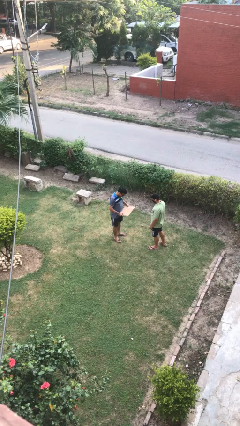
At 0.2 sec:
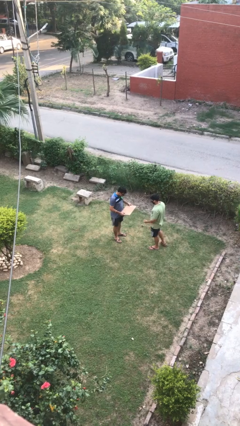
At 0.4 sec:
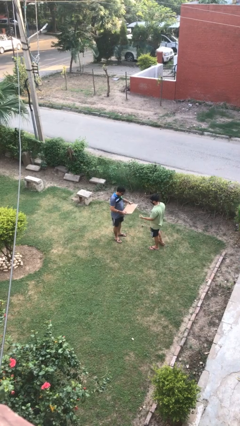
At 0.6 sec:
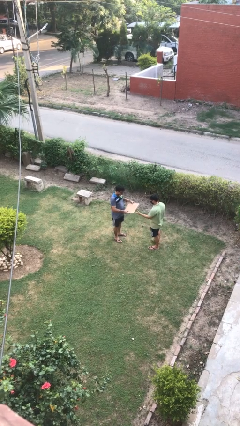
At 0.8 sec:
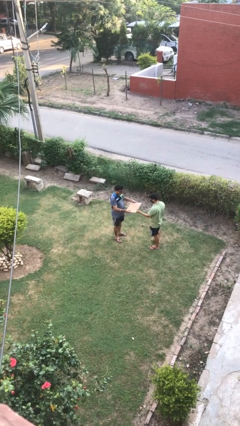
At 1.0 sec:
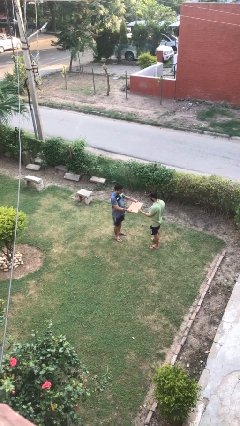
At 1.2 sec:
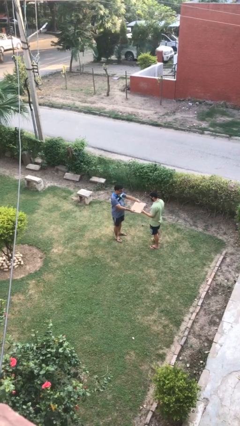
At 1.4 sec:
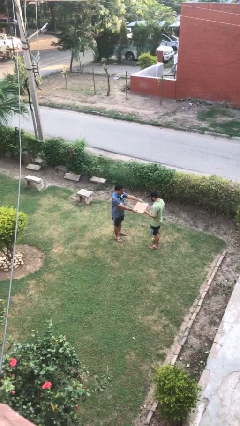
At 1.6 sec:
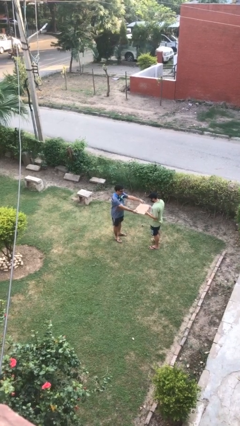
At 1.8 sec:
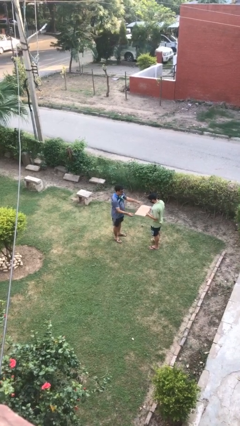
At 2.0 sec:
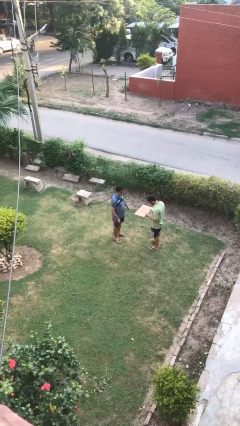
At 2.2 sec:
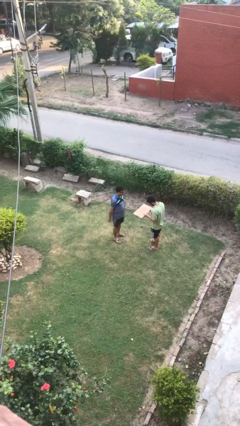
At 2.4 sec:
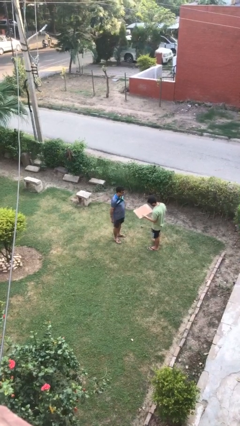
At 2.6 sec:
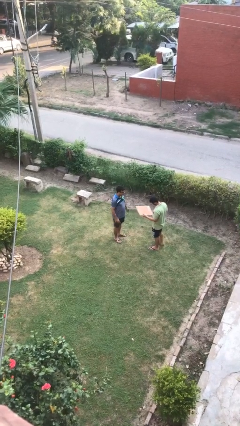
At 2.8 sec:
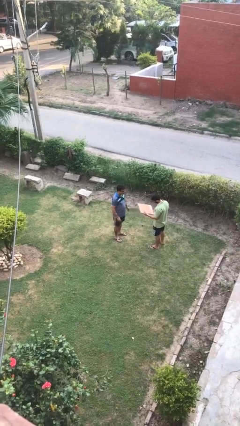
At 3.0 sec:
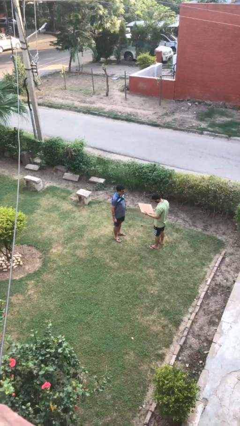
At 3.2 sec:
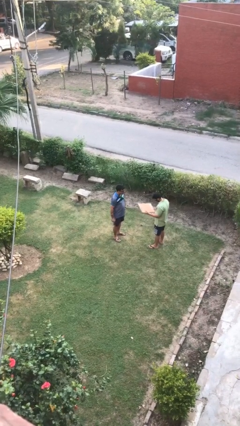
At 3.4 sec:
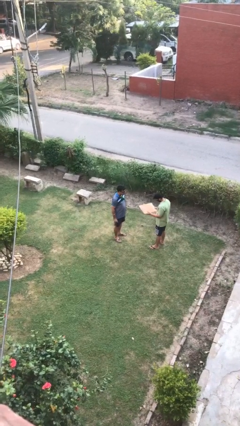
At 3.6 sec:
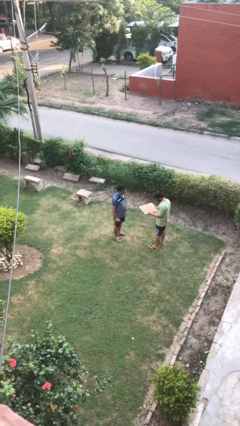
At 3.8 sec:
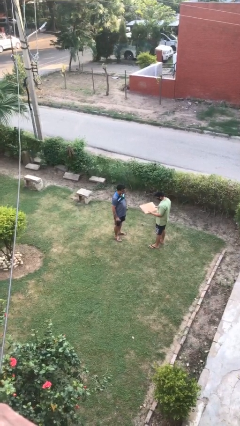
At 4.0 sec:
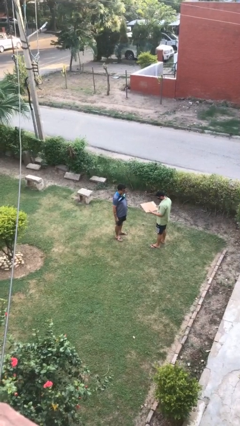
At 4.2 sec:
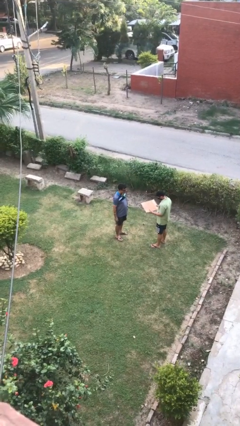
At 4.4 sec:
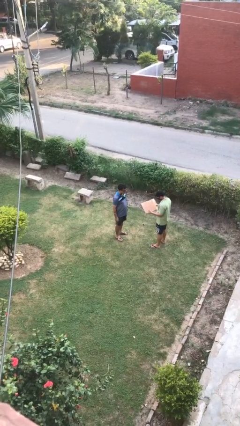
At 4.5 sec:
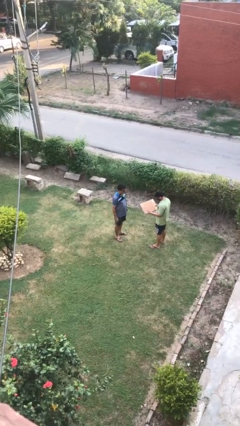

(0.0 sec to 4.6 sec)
person transfers object to person

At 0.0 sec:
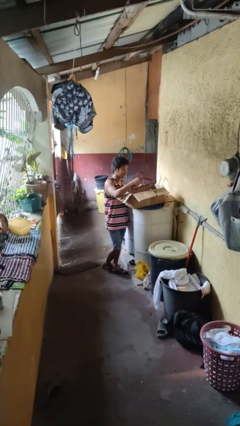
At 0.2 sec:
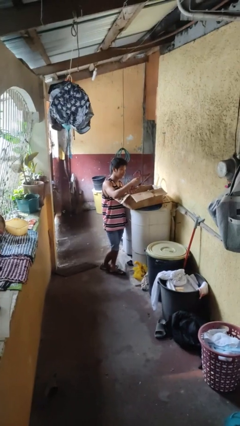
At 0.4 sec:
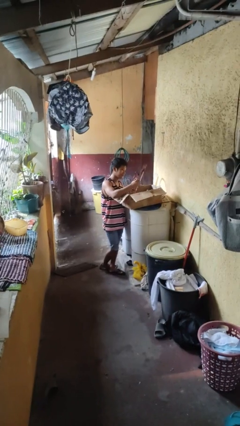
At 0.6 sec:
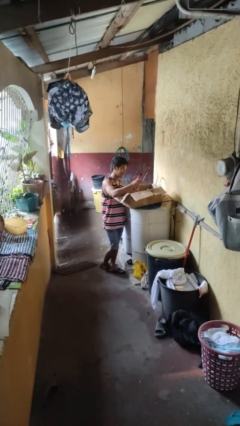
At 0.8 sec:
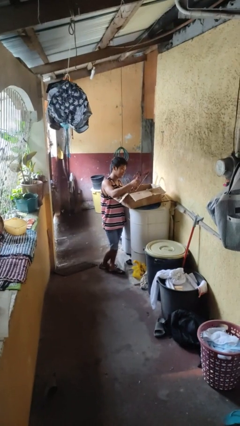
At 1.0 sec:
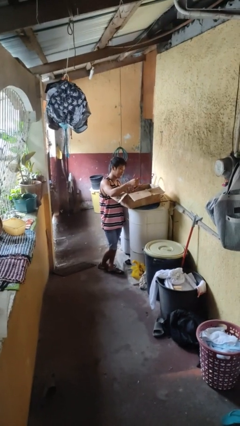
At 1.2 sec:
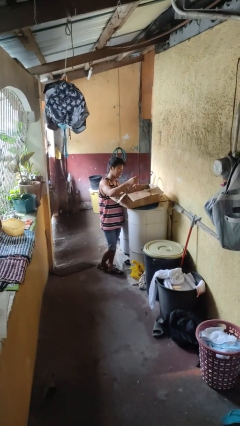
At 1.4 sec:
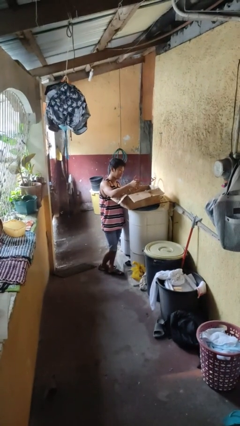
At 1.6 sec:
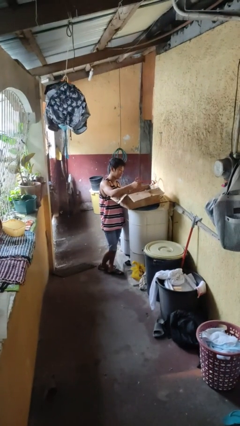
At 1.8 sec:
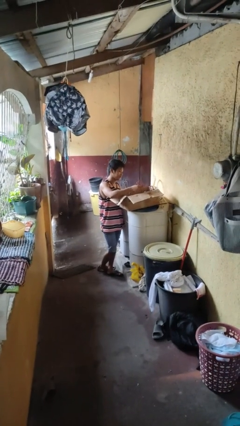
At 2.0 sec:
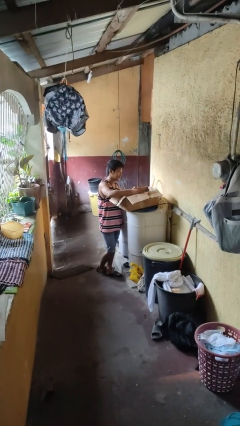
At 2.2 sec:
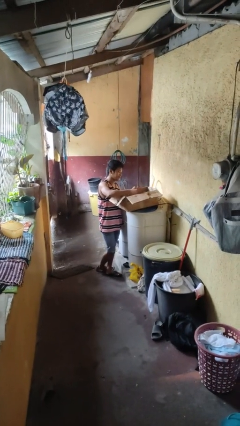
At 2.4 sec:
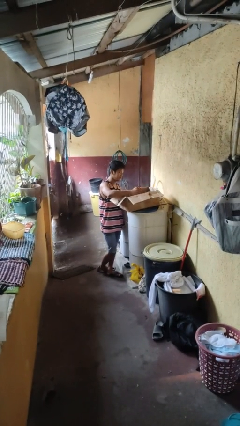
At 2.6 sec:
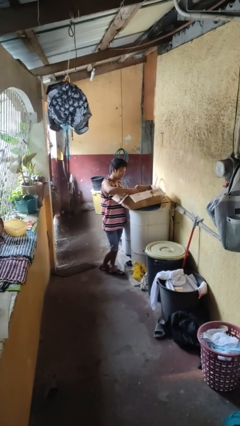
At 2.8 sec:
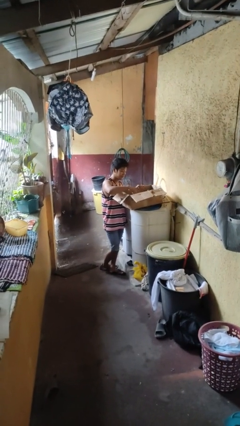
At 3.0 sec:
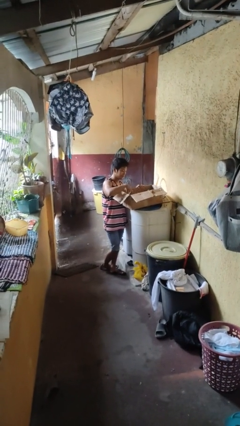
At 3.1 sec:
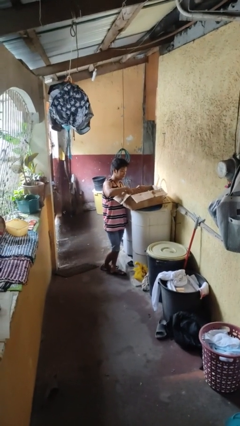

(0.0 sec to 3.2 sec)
person puts object into box

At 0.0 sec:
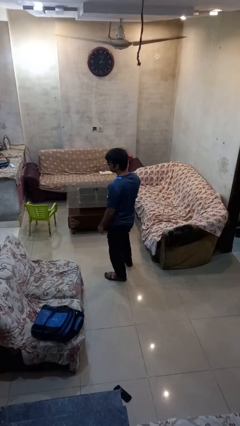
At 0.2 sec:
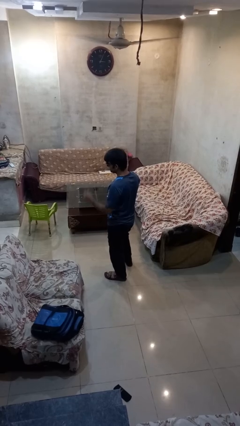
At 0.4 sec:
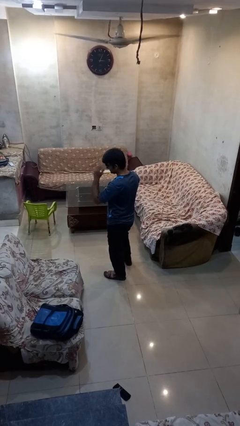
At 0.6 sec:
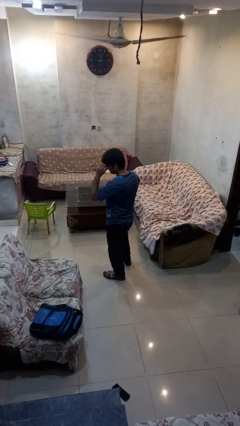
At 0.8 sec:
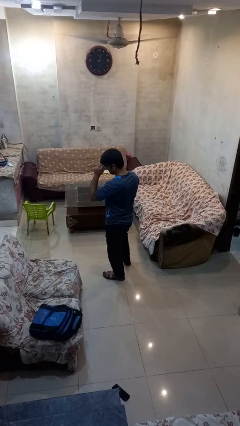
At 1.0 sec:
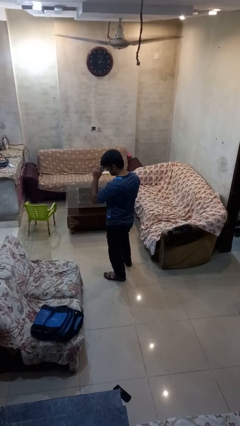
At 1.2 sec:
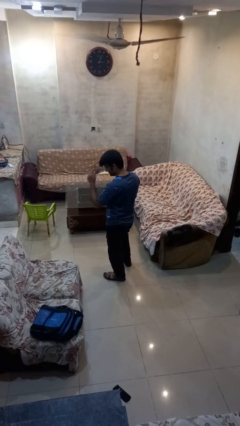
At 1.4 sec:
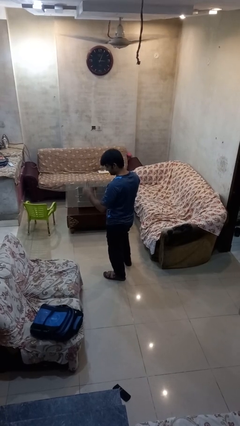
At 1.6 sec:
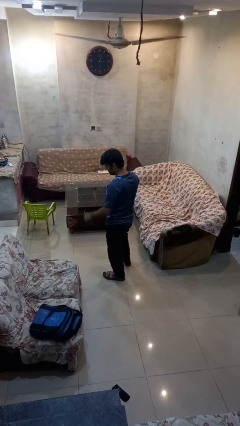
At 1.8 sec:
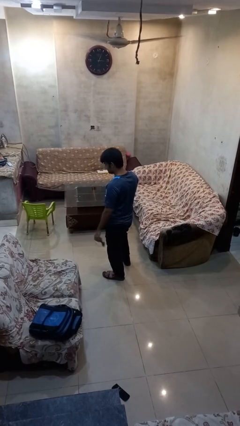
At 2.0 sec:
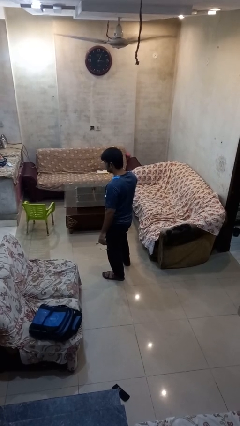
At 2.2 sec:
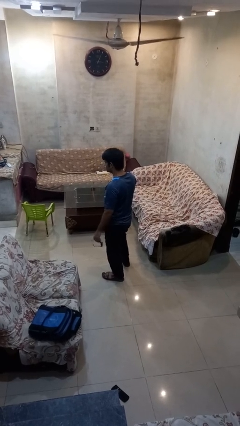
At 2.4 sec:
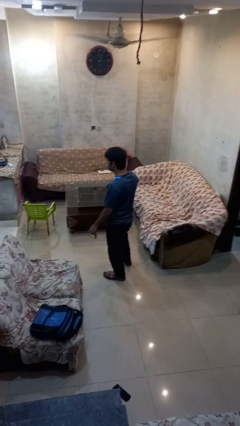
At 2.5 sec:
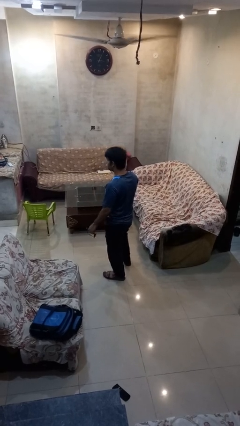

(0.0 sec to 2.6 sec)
person takes off sunglasses

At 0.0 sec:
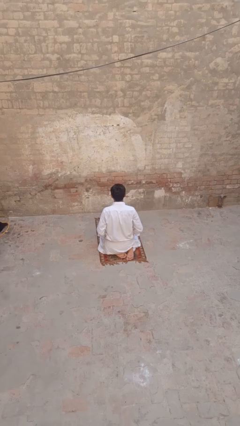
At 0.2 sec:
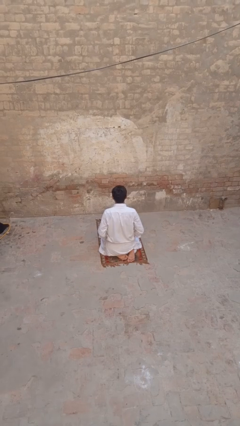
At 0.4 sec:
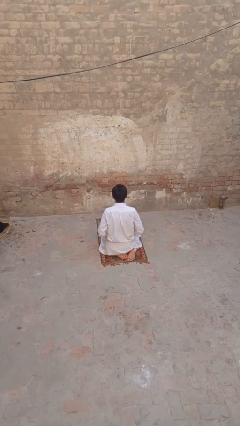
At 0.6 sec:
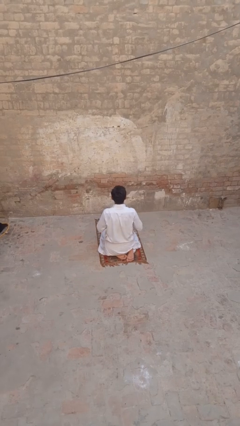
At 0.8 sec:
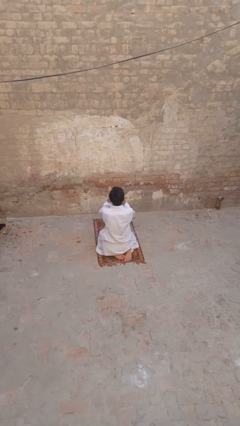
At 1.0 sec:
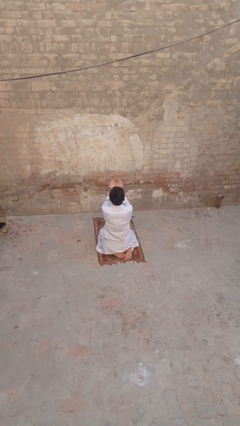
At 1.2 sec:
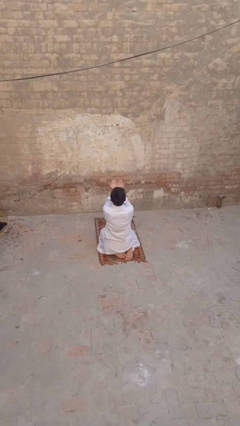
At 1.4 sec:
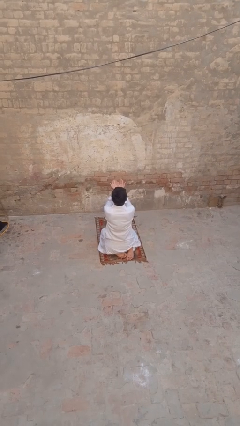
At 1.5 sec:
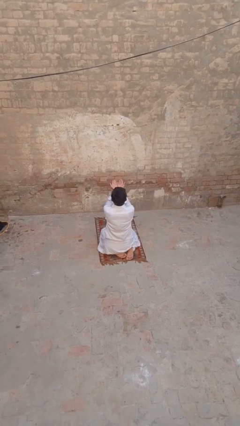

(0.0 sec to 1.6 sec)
person prays

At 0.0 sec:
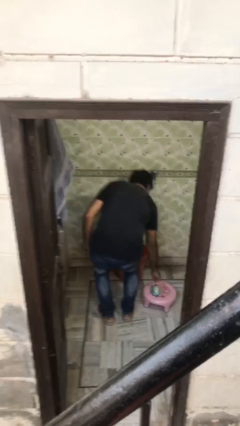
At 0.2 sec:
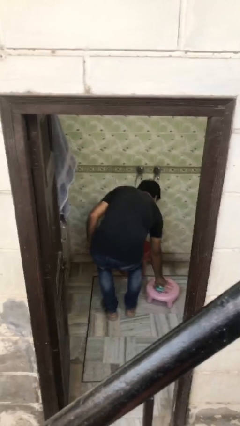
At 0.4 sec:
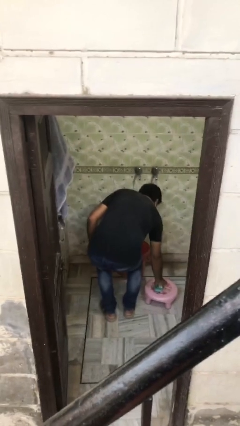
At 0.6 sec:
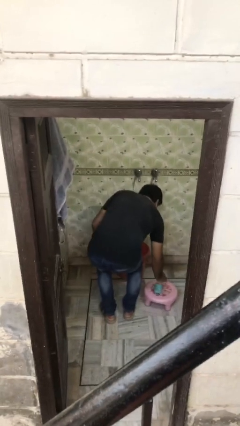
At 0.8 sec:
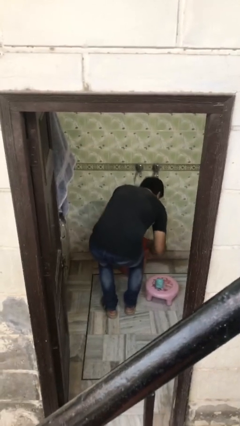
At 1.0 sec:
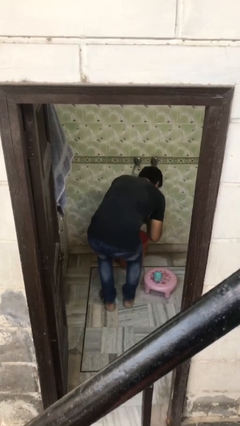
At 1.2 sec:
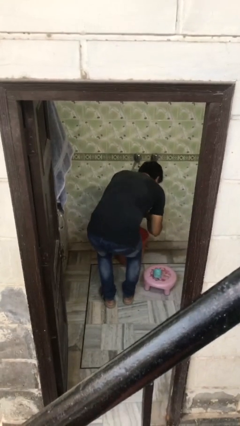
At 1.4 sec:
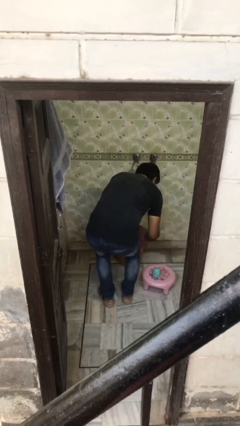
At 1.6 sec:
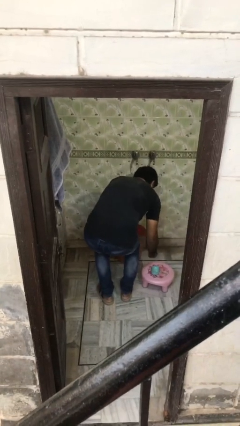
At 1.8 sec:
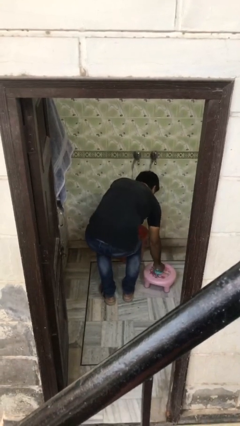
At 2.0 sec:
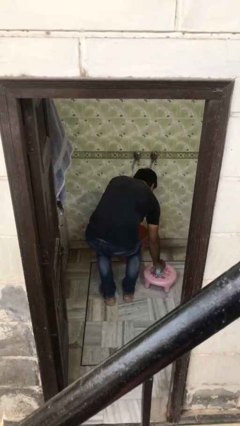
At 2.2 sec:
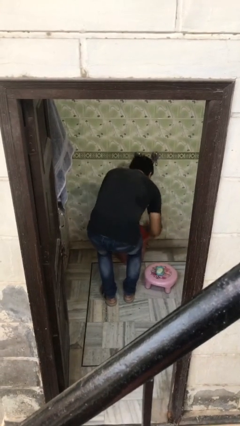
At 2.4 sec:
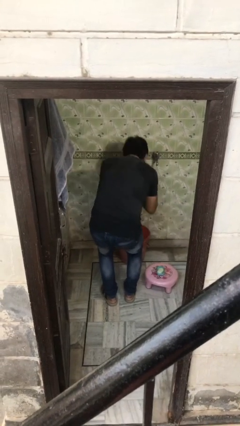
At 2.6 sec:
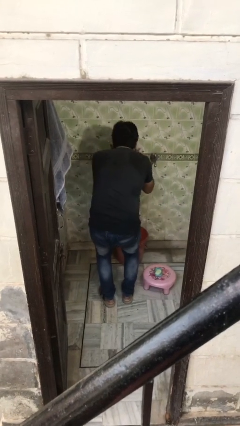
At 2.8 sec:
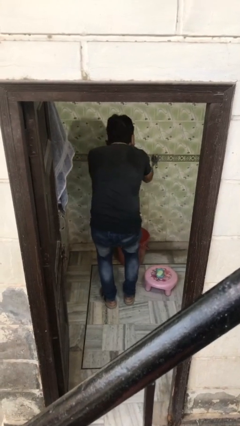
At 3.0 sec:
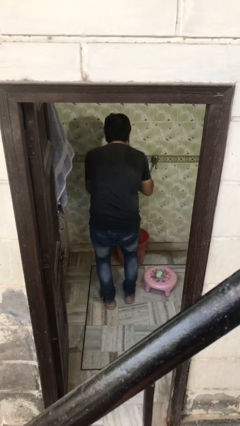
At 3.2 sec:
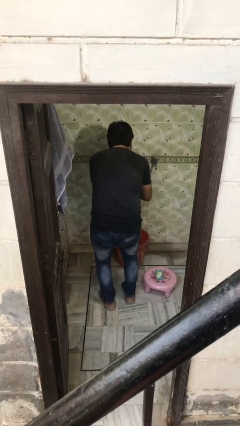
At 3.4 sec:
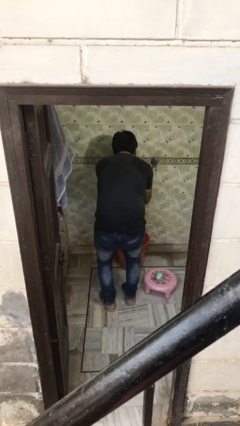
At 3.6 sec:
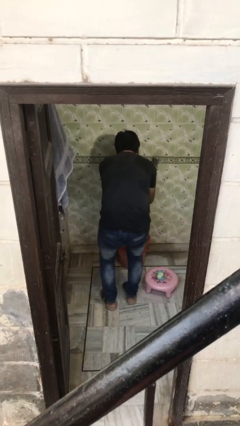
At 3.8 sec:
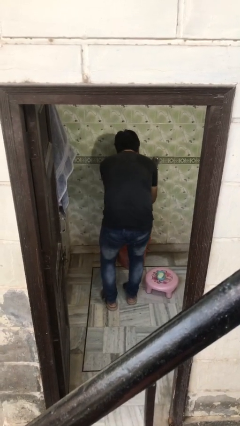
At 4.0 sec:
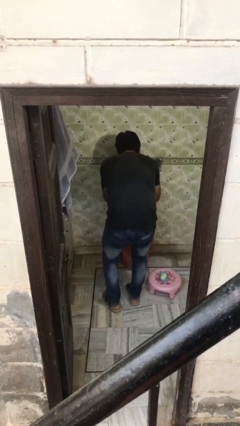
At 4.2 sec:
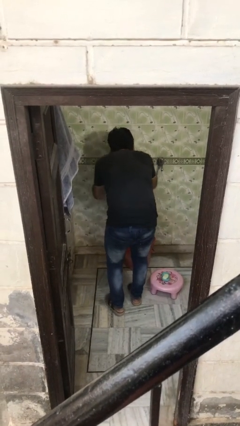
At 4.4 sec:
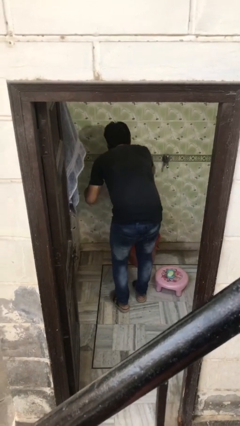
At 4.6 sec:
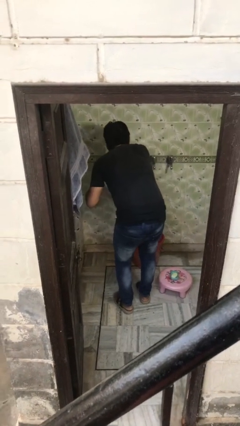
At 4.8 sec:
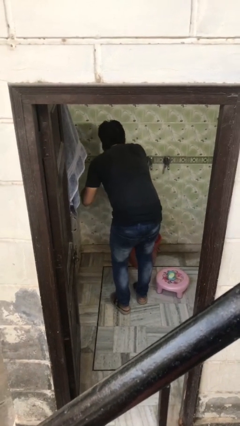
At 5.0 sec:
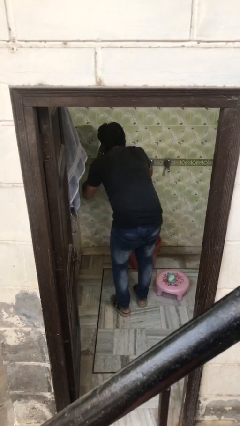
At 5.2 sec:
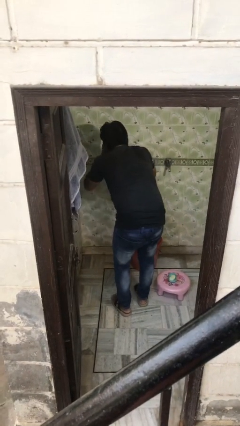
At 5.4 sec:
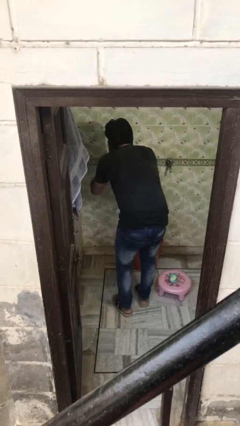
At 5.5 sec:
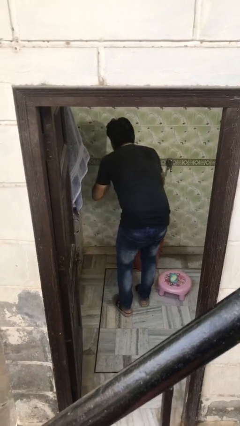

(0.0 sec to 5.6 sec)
person washes face
